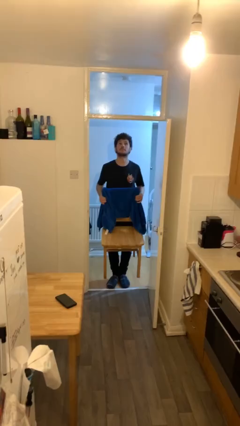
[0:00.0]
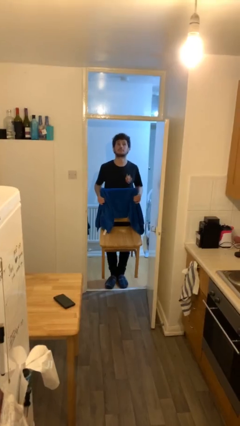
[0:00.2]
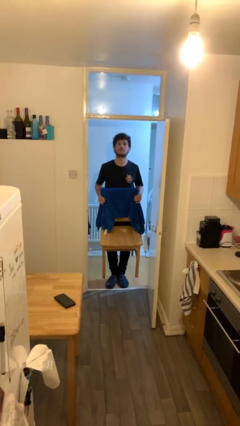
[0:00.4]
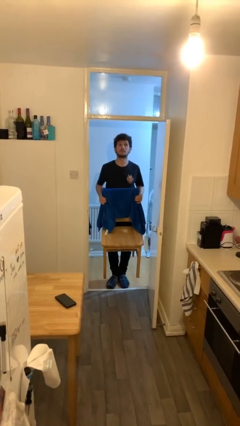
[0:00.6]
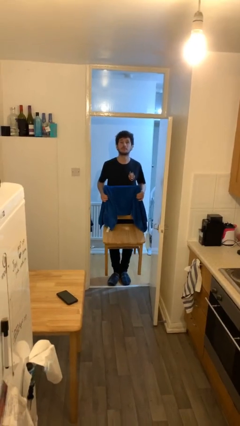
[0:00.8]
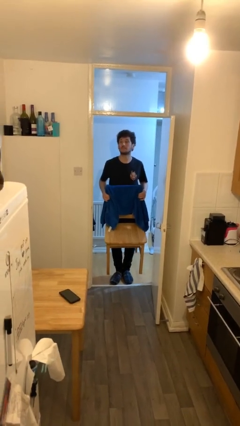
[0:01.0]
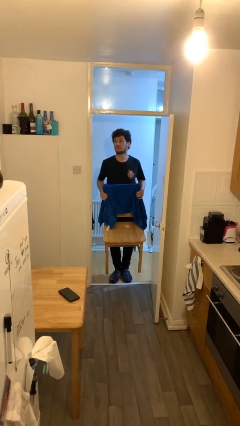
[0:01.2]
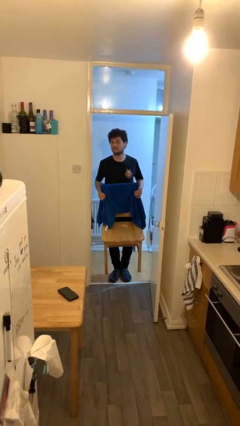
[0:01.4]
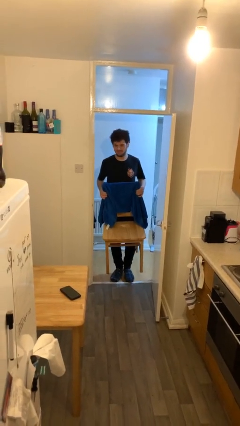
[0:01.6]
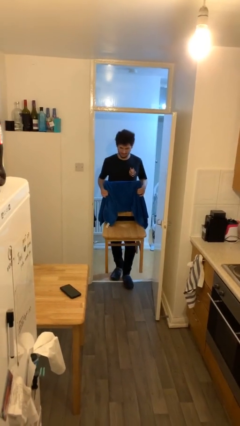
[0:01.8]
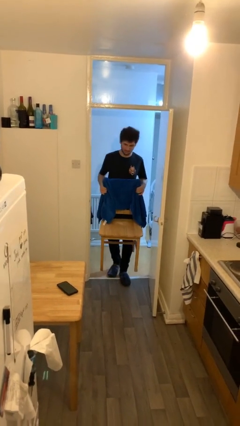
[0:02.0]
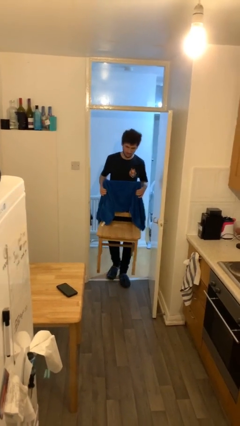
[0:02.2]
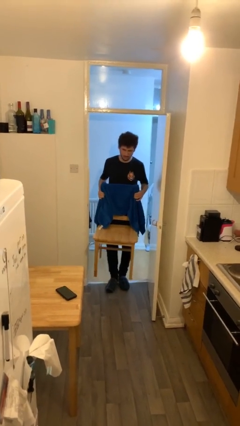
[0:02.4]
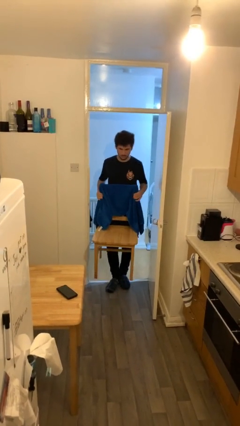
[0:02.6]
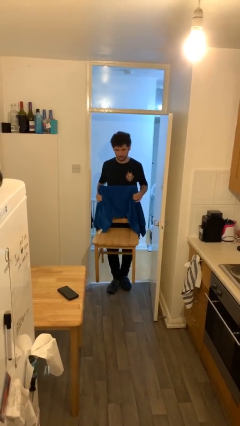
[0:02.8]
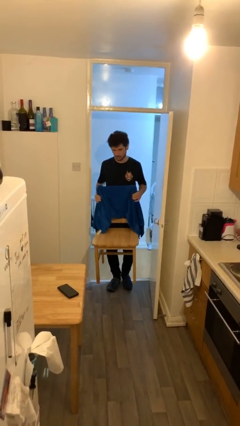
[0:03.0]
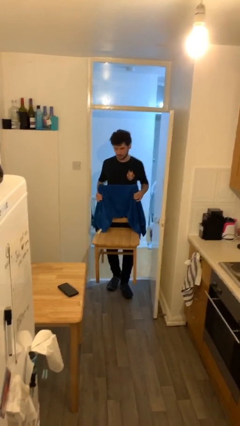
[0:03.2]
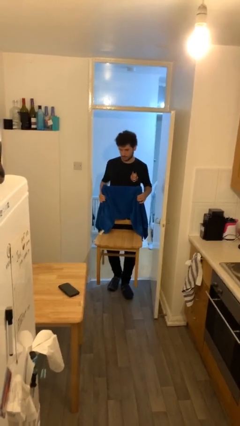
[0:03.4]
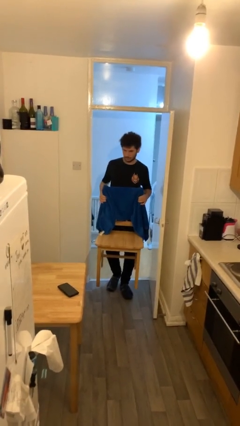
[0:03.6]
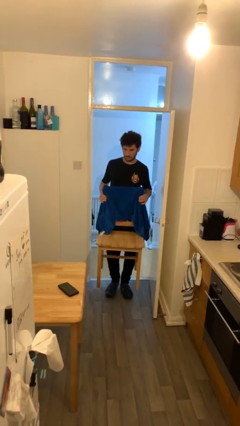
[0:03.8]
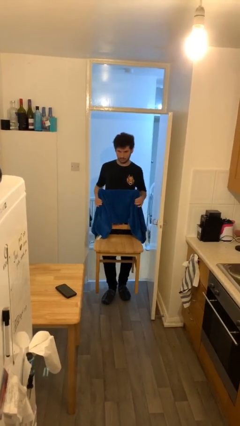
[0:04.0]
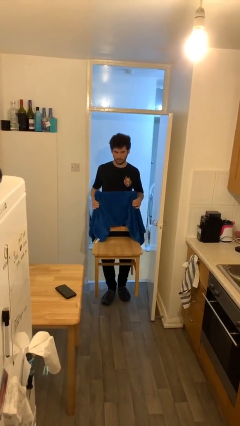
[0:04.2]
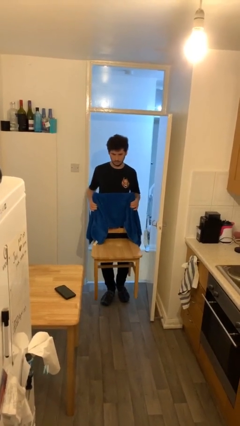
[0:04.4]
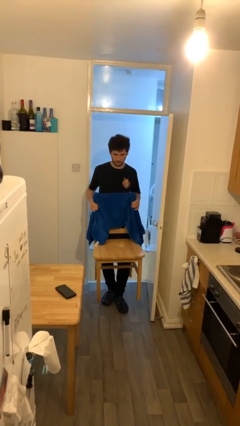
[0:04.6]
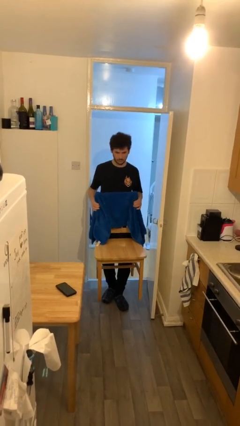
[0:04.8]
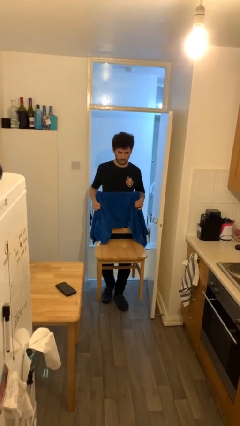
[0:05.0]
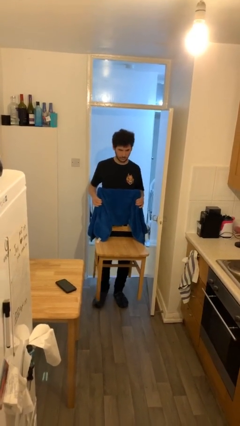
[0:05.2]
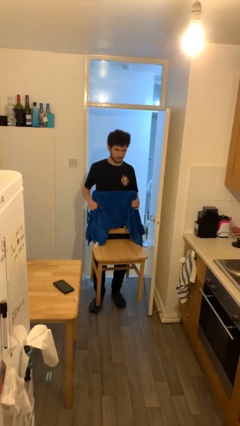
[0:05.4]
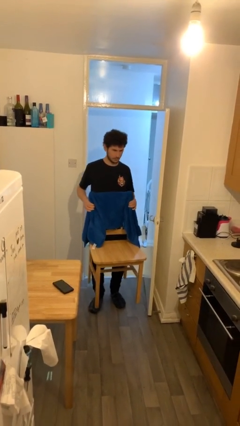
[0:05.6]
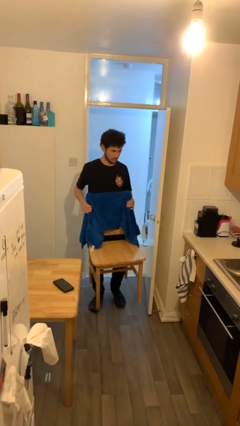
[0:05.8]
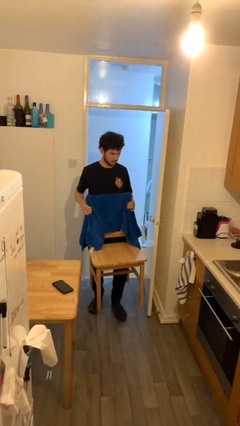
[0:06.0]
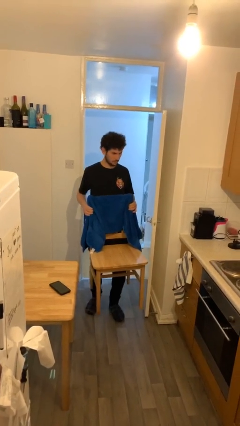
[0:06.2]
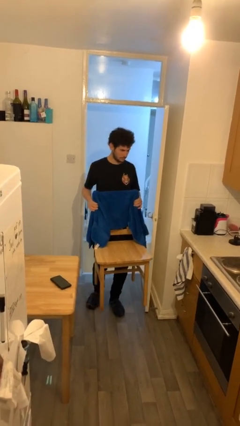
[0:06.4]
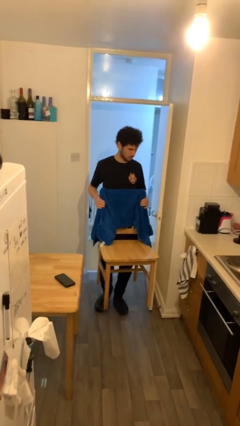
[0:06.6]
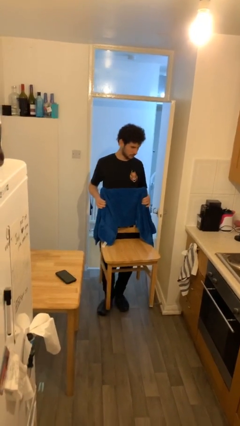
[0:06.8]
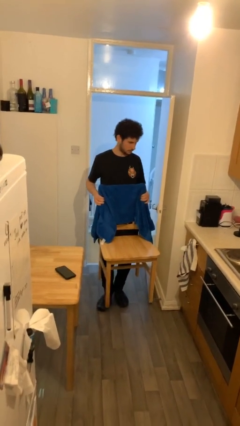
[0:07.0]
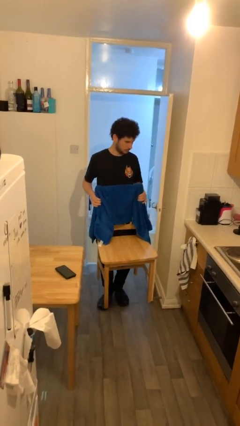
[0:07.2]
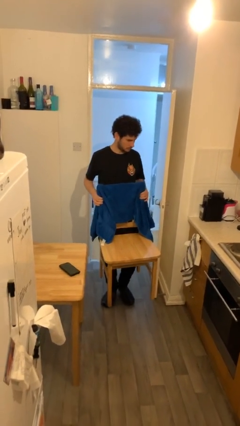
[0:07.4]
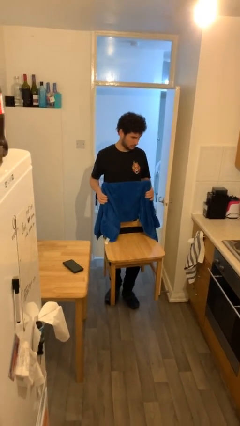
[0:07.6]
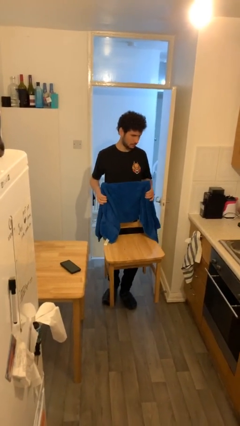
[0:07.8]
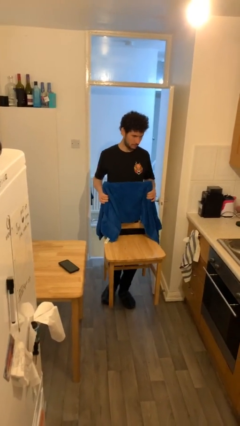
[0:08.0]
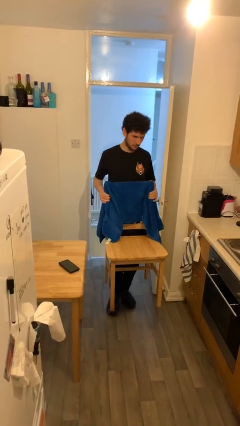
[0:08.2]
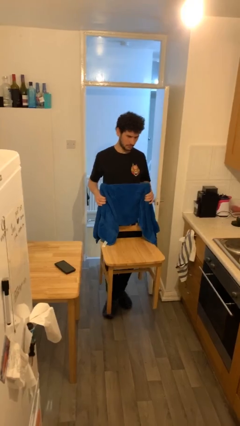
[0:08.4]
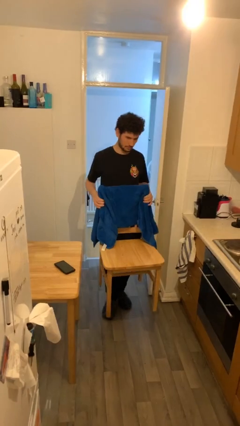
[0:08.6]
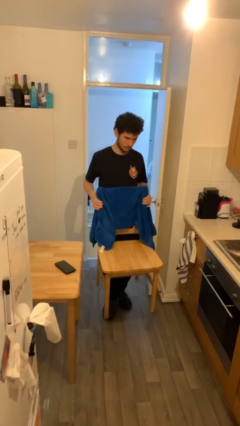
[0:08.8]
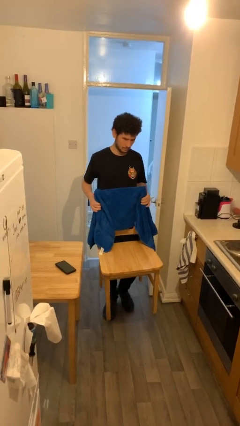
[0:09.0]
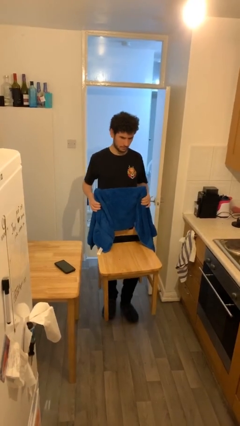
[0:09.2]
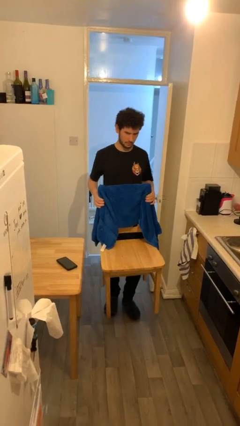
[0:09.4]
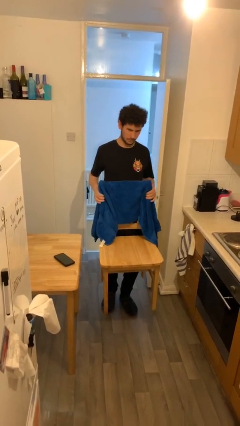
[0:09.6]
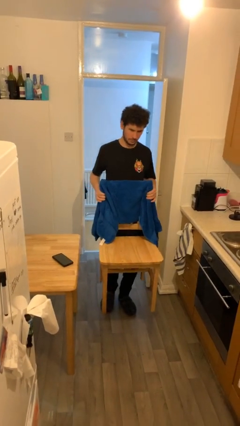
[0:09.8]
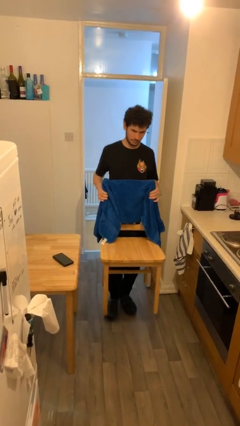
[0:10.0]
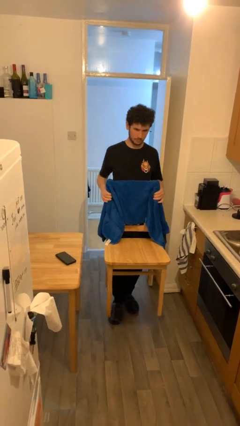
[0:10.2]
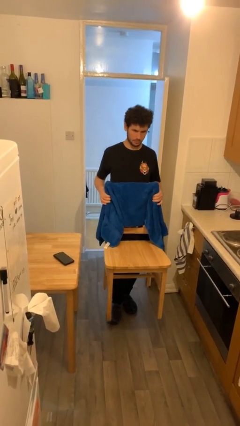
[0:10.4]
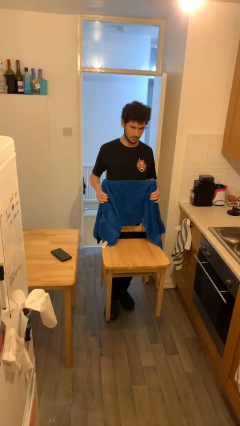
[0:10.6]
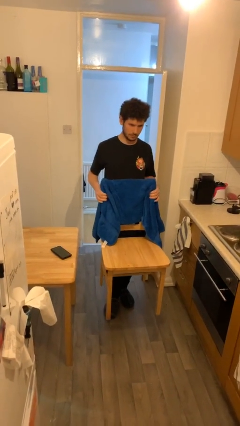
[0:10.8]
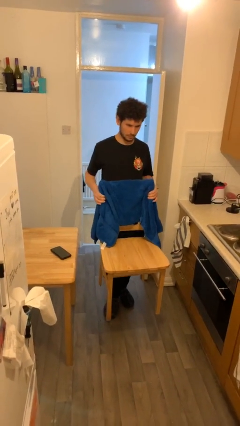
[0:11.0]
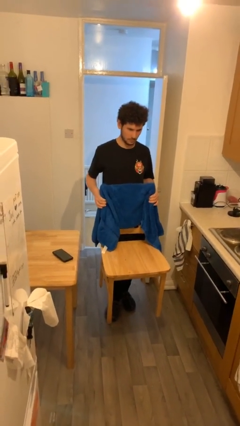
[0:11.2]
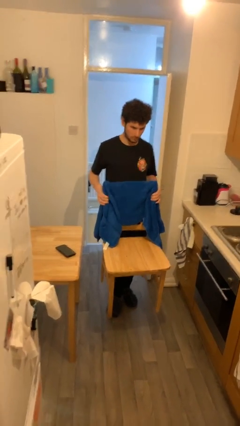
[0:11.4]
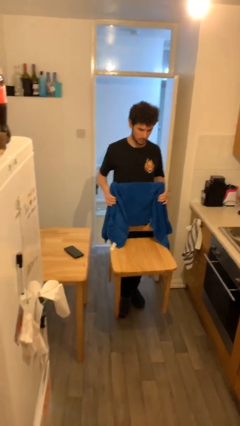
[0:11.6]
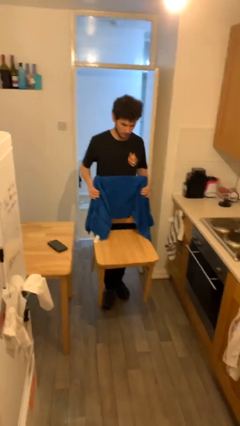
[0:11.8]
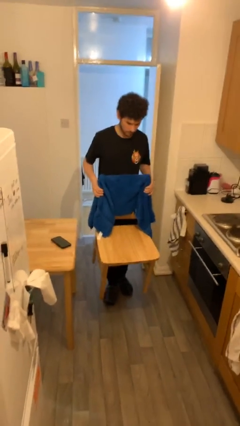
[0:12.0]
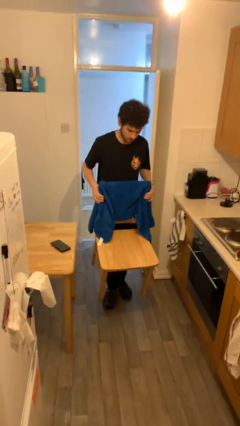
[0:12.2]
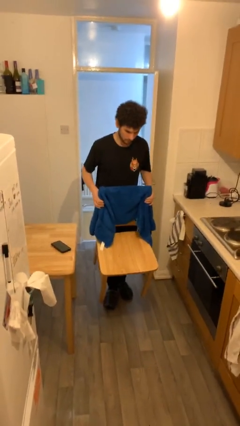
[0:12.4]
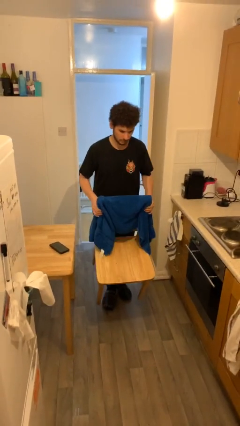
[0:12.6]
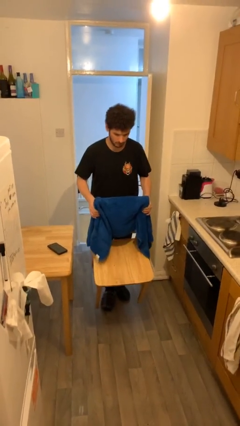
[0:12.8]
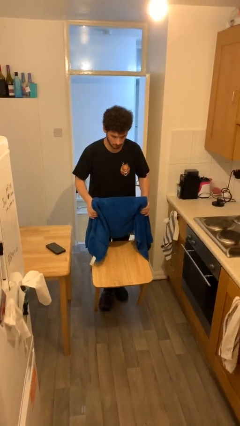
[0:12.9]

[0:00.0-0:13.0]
person carries heavy object

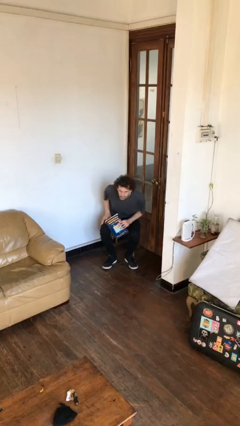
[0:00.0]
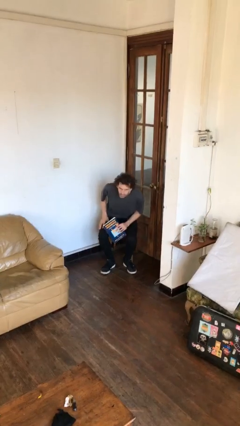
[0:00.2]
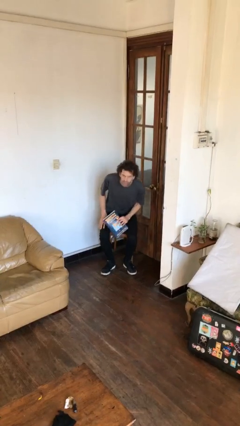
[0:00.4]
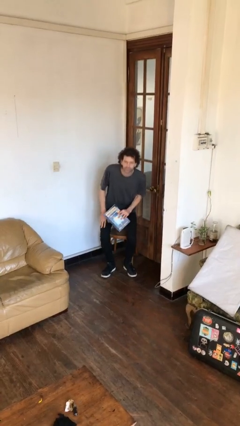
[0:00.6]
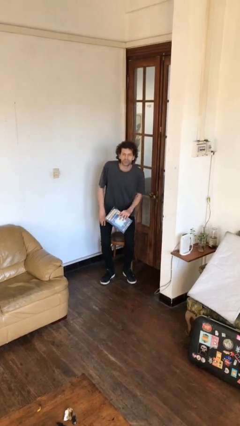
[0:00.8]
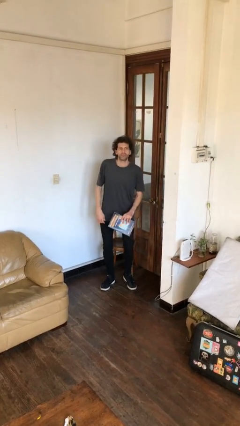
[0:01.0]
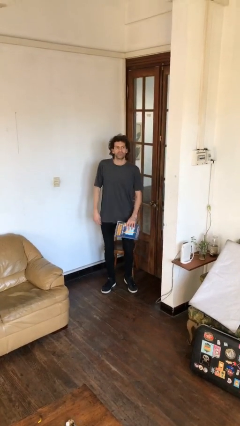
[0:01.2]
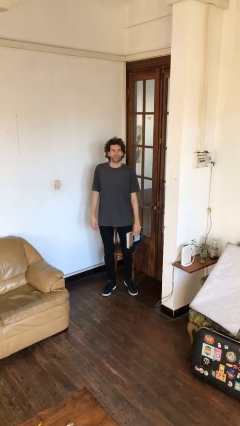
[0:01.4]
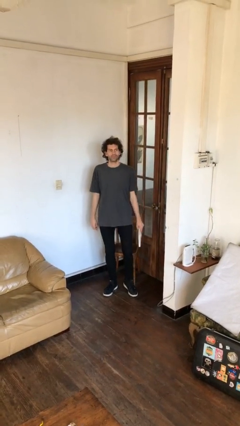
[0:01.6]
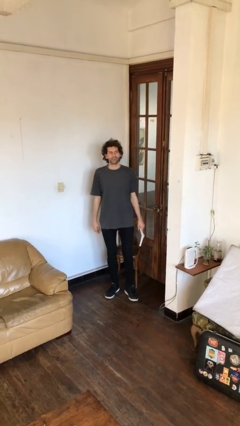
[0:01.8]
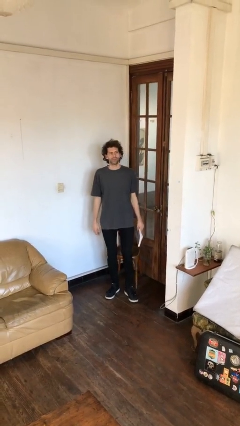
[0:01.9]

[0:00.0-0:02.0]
person stands up

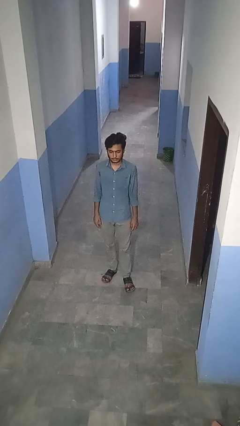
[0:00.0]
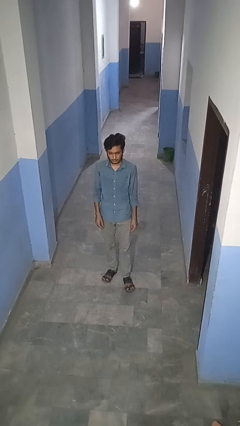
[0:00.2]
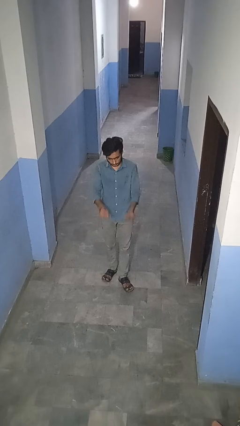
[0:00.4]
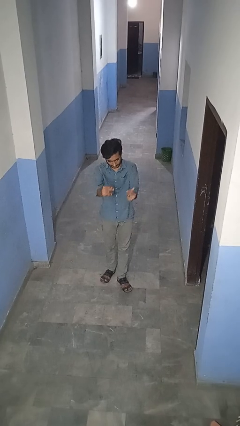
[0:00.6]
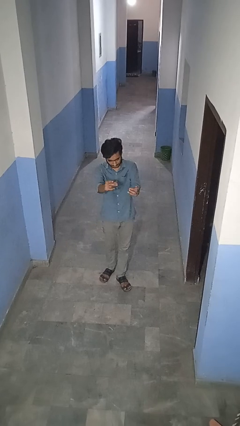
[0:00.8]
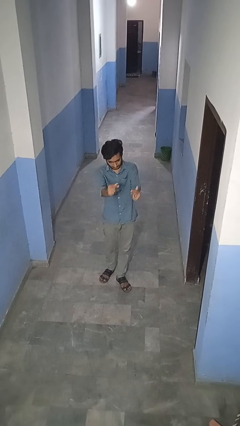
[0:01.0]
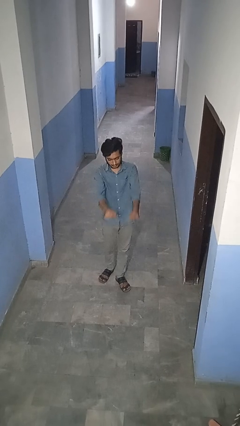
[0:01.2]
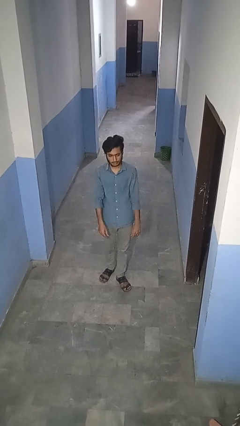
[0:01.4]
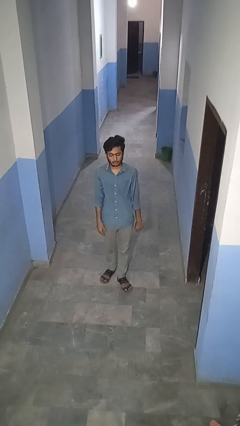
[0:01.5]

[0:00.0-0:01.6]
person snaps fingers

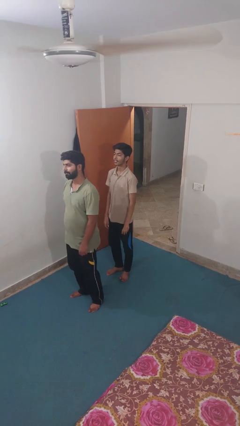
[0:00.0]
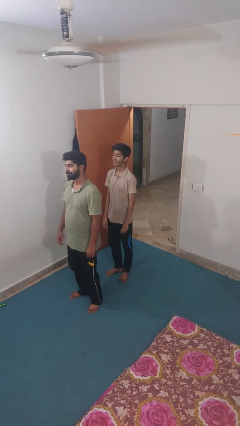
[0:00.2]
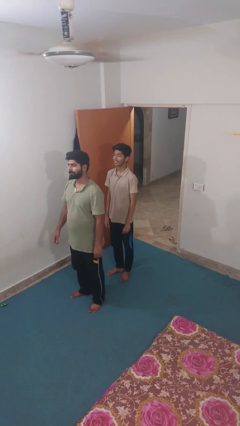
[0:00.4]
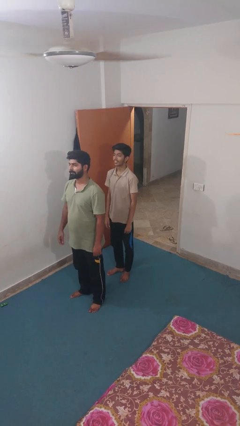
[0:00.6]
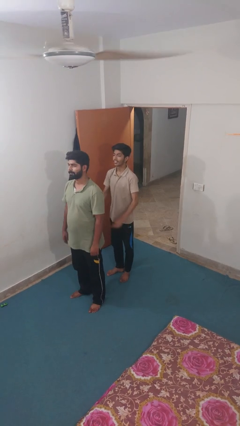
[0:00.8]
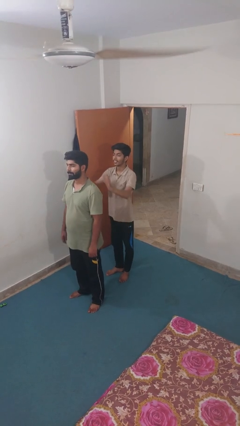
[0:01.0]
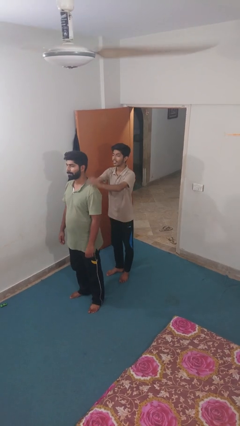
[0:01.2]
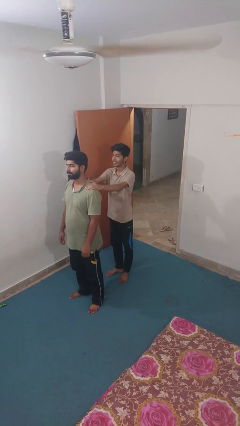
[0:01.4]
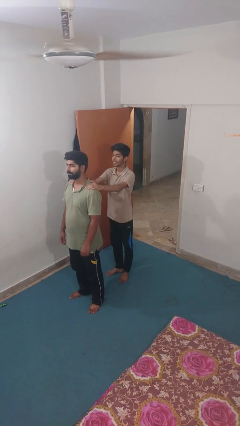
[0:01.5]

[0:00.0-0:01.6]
person grabs person by shoulder
